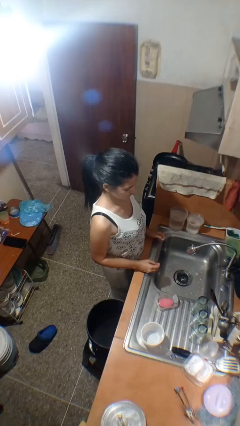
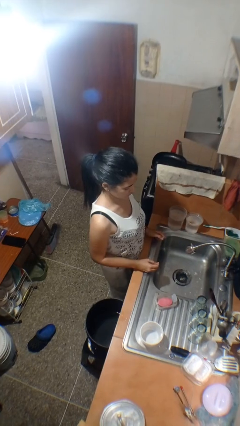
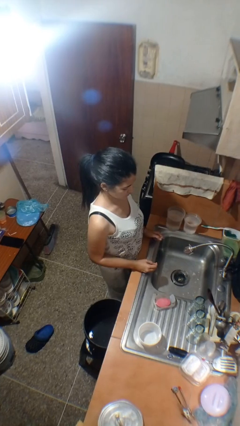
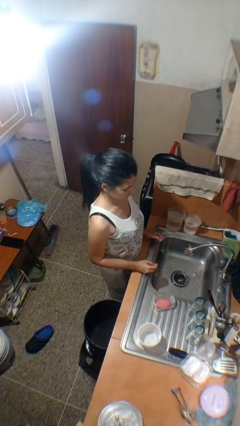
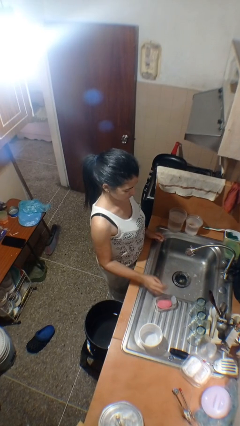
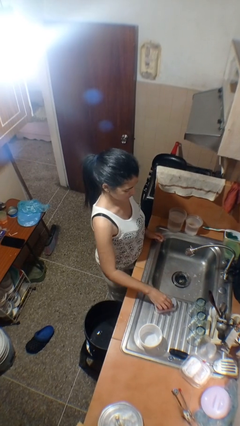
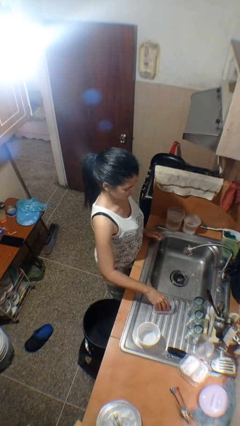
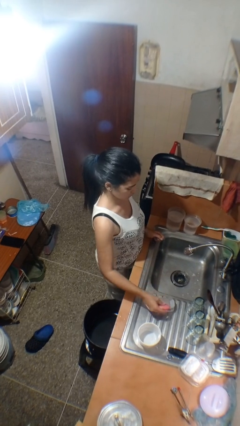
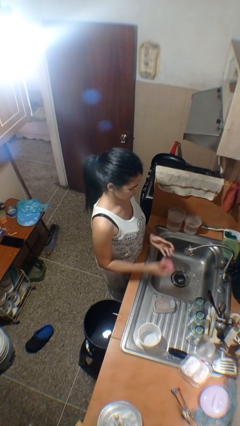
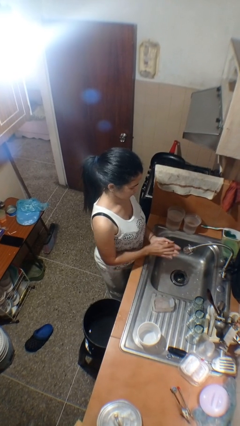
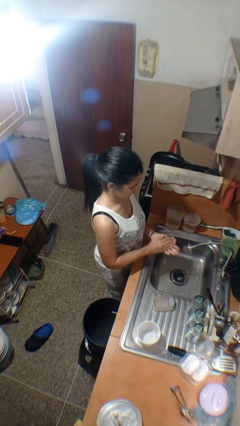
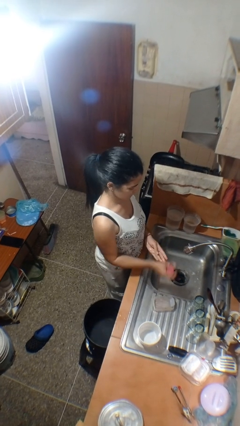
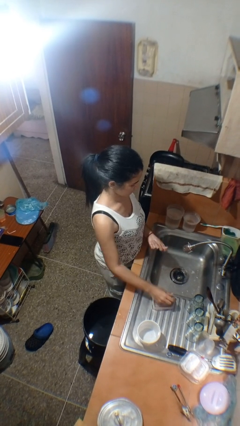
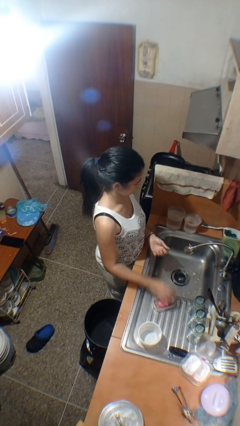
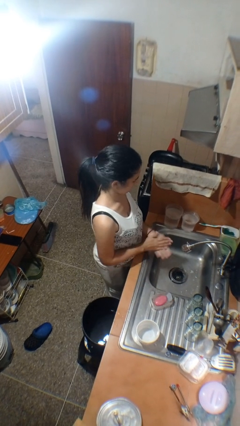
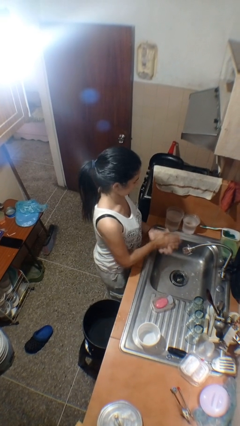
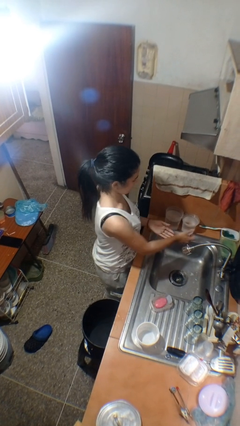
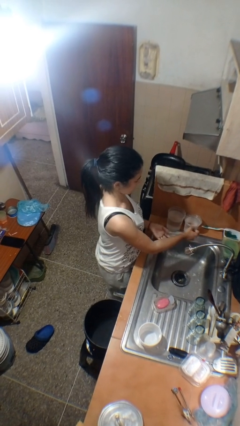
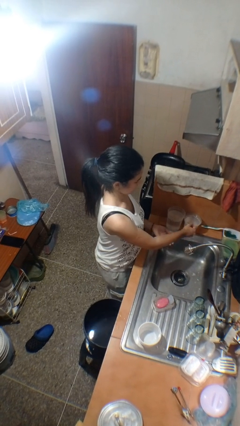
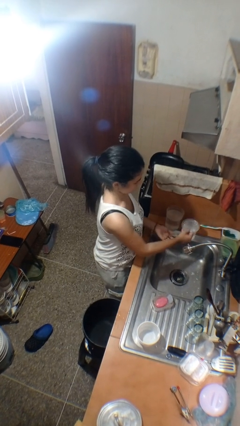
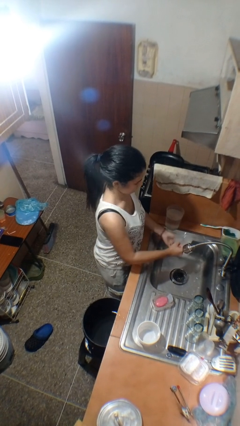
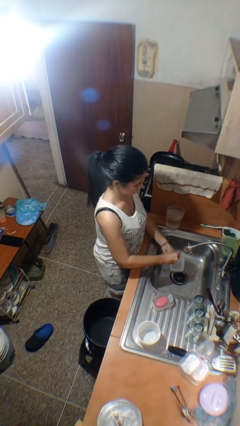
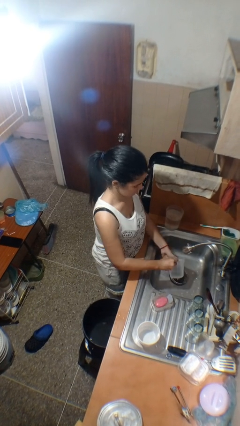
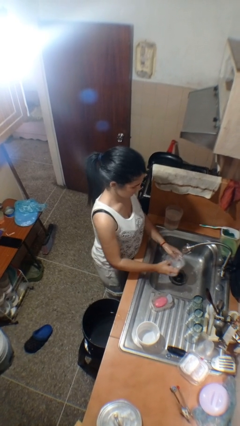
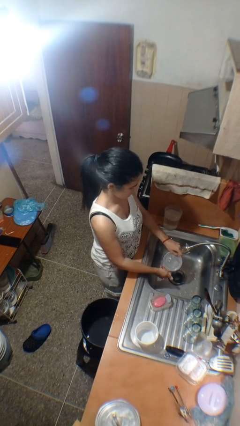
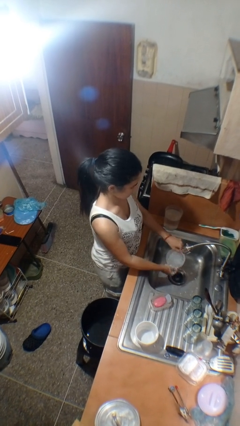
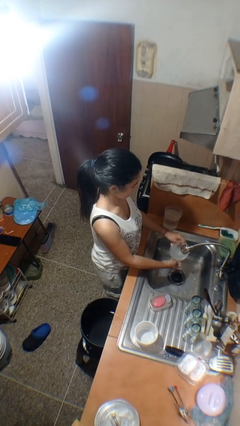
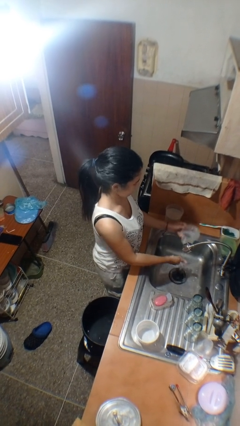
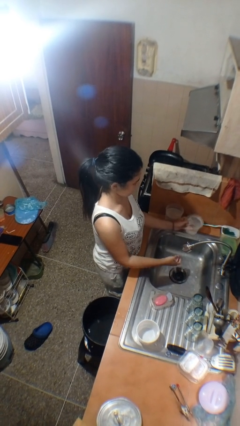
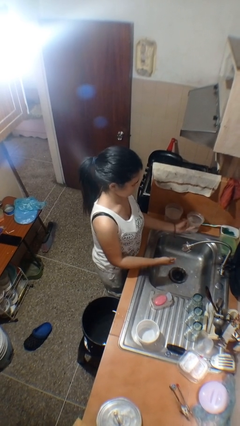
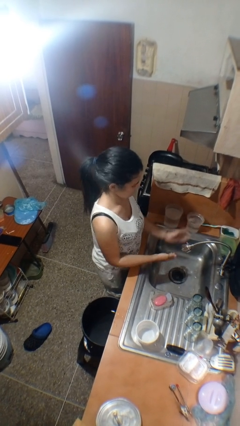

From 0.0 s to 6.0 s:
person washes hands

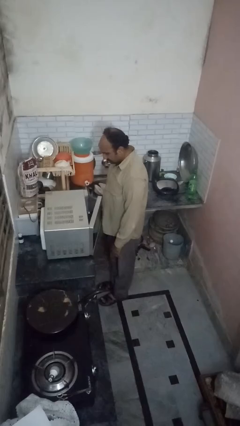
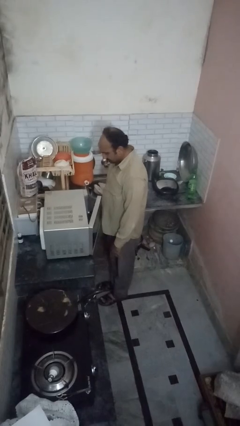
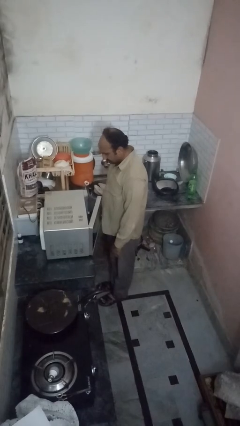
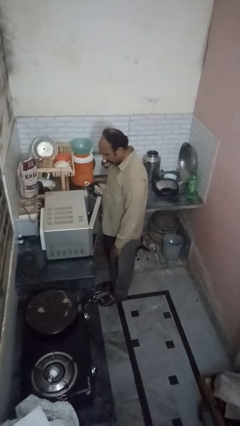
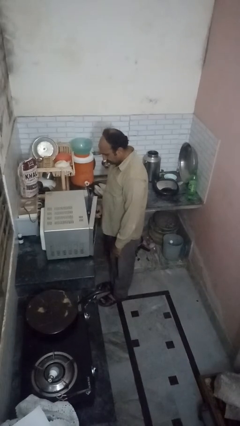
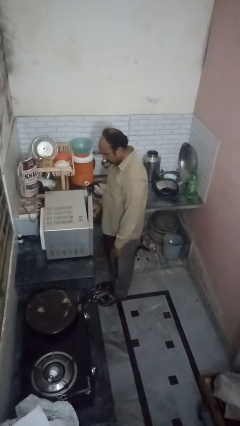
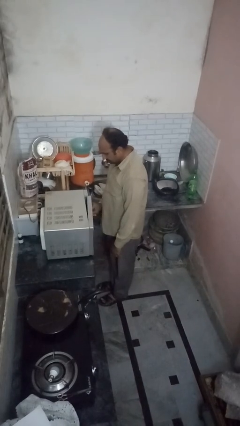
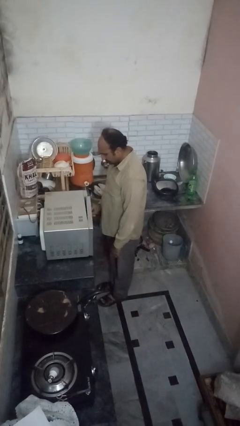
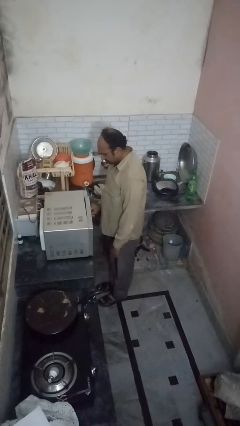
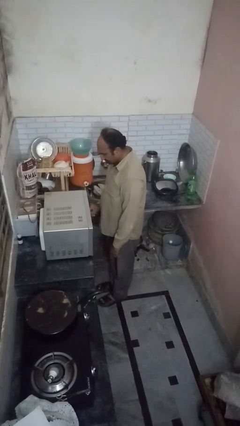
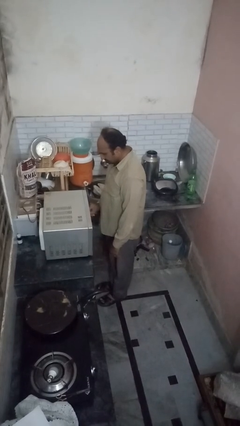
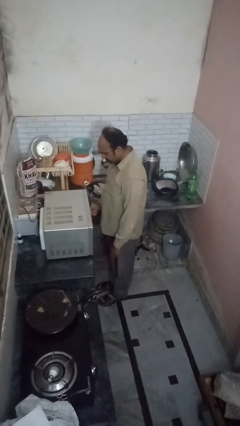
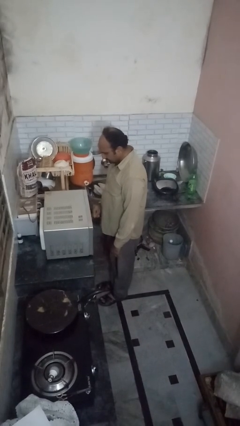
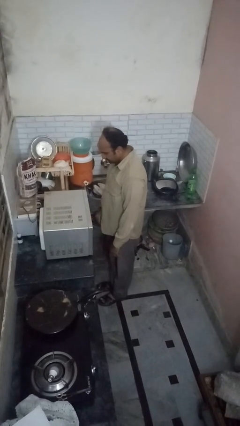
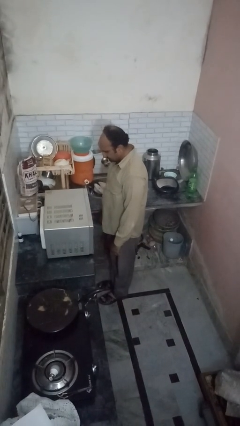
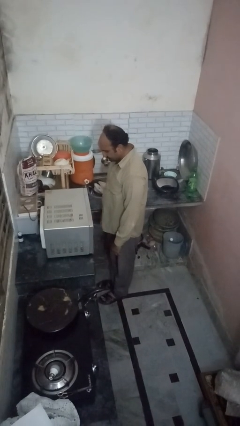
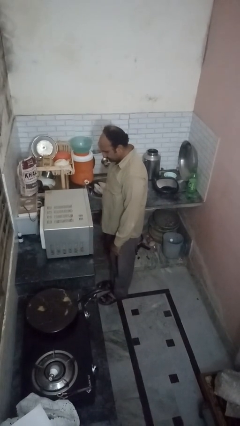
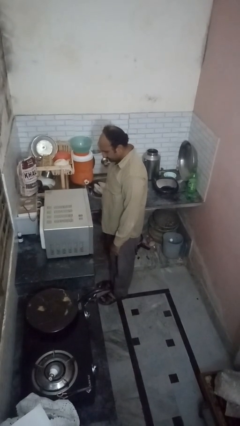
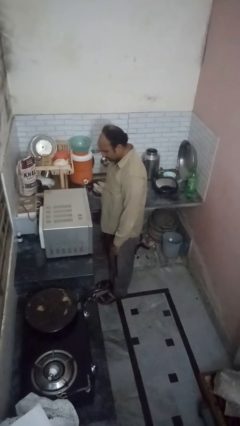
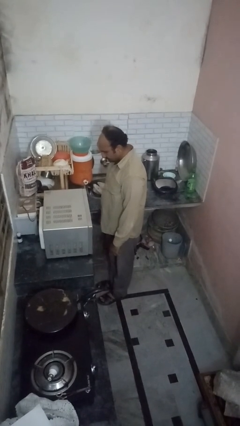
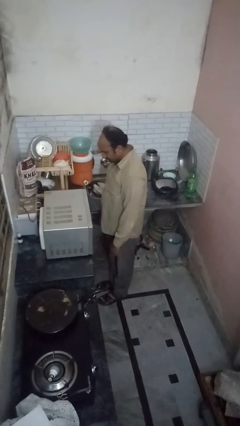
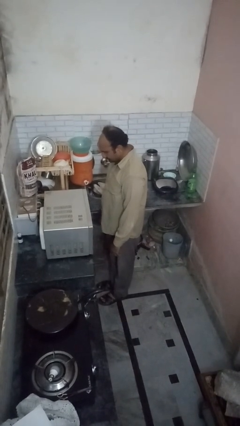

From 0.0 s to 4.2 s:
person closes oven door

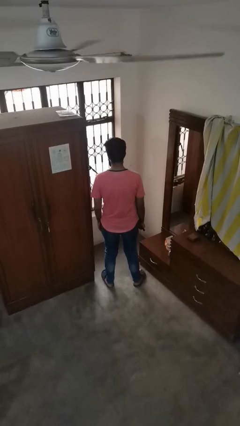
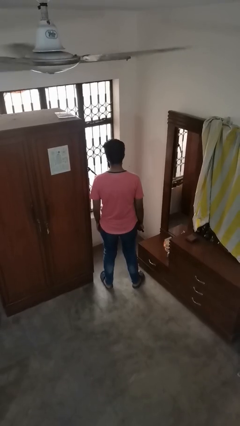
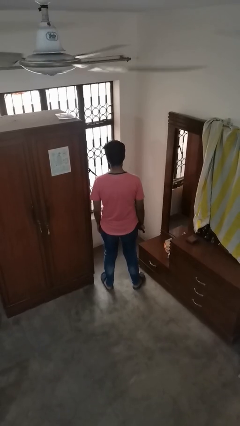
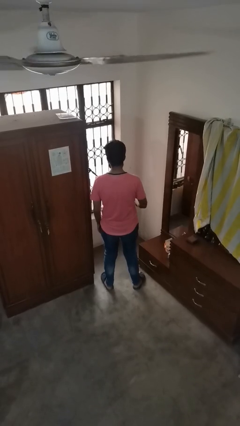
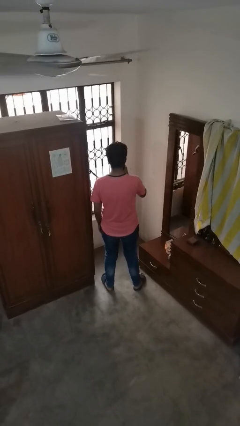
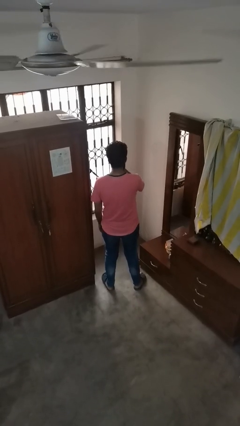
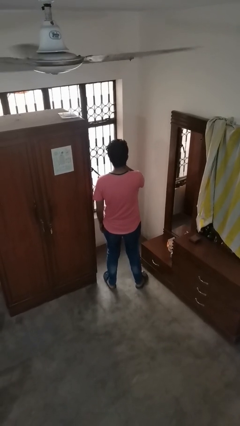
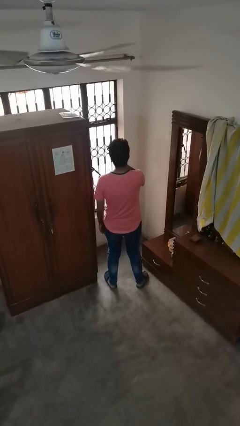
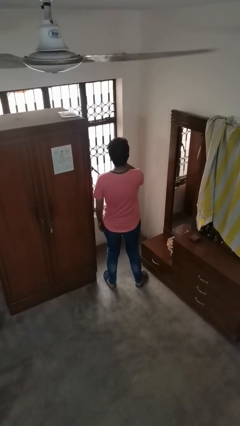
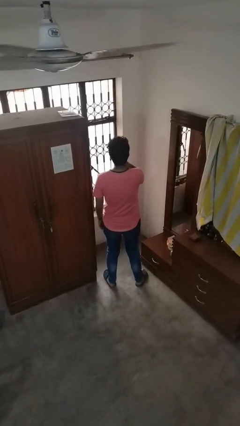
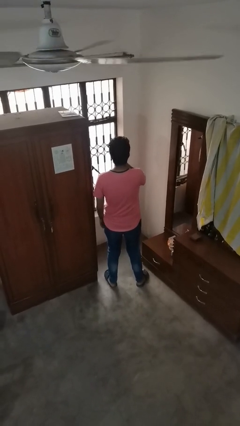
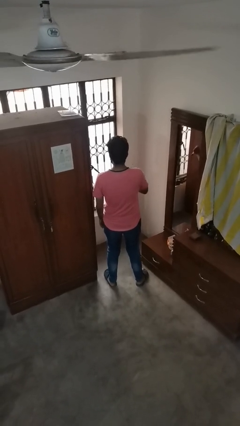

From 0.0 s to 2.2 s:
person vapes

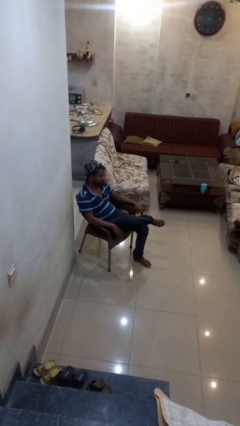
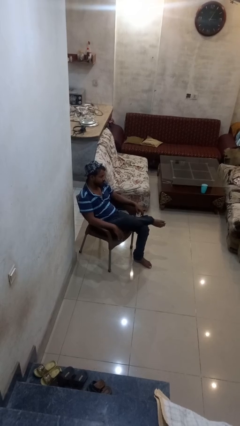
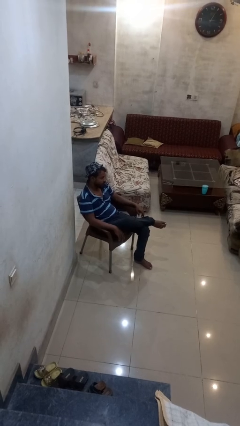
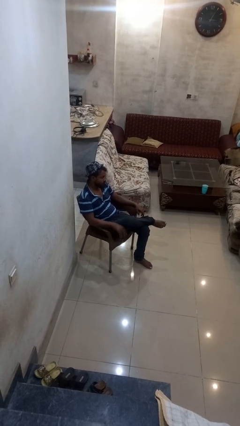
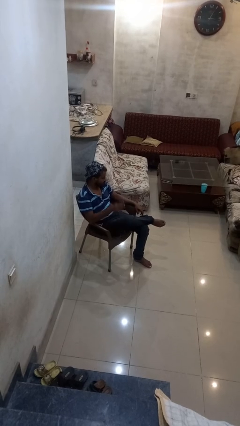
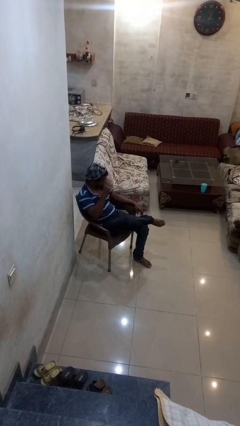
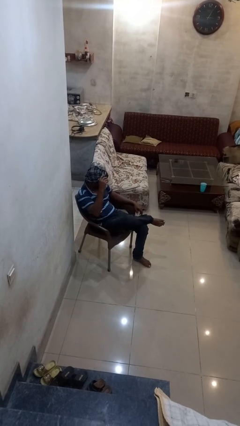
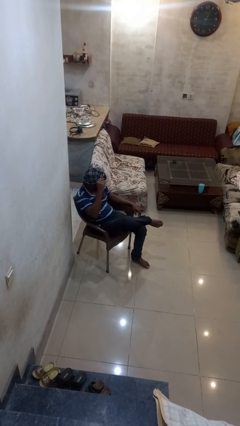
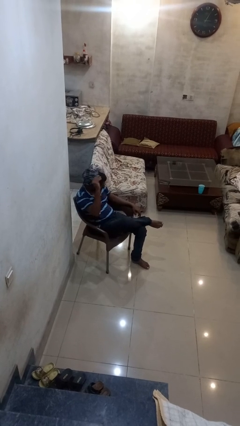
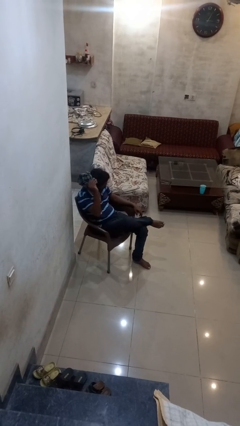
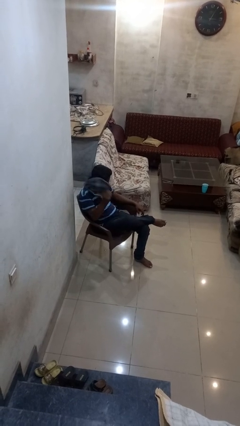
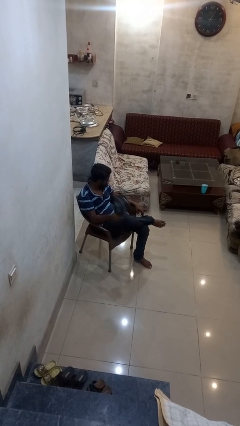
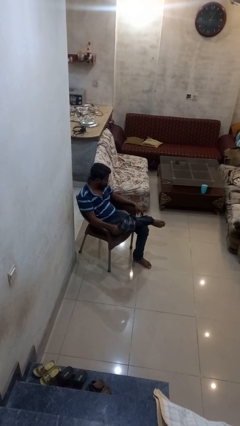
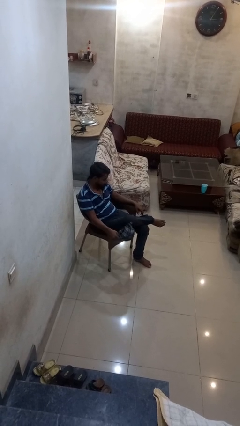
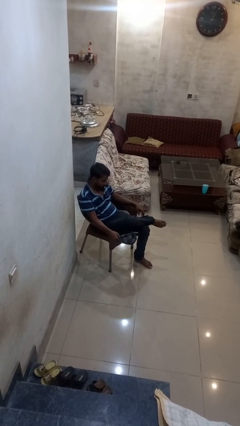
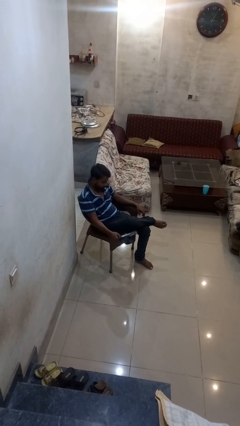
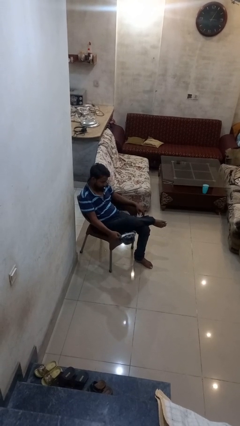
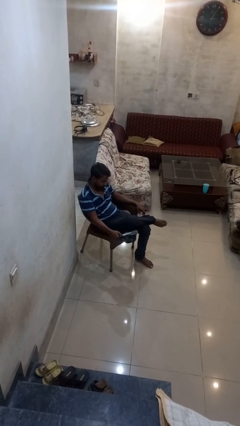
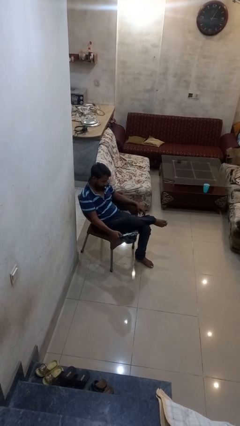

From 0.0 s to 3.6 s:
person takes off hat

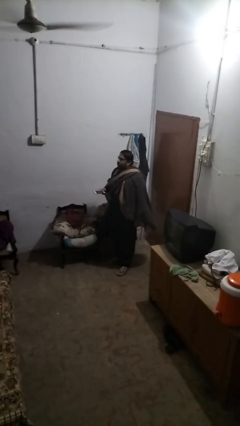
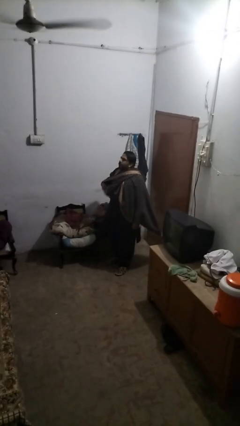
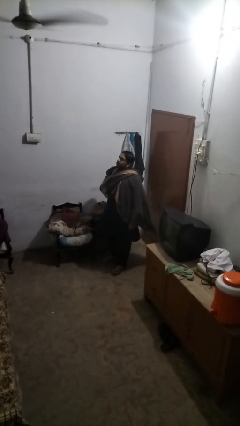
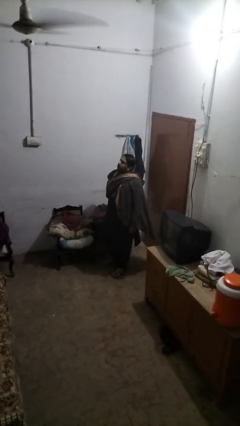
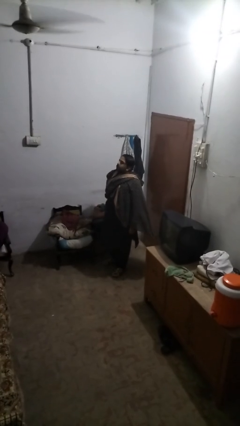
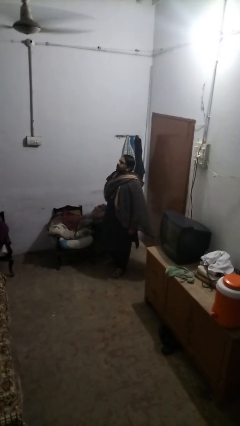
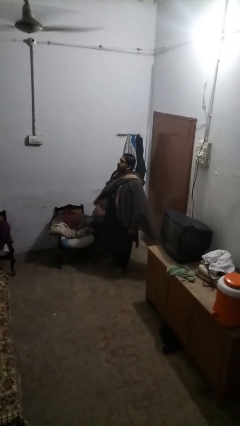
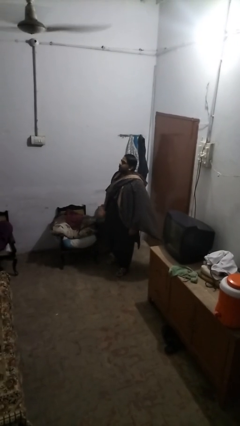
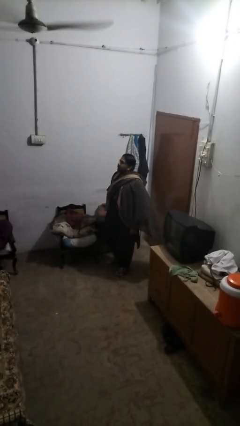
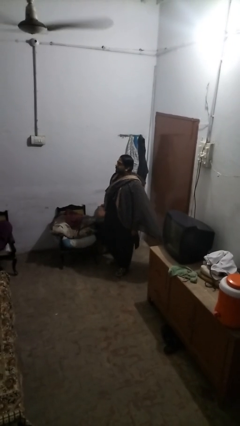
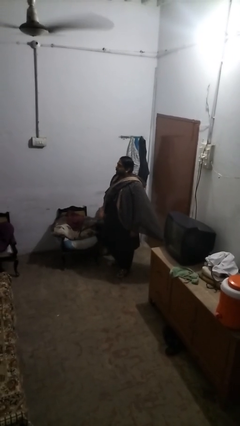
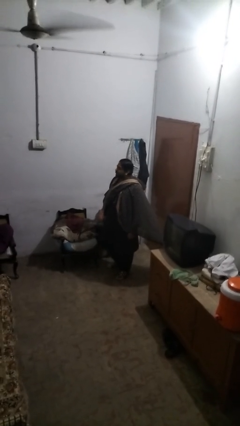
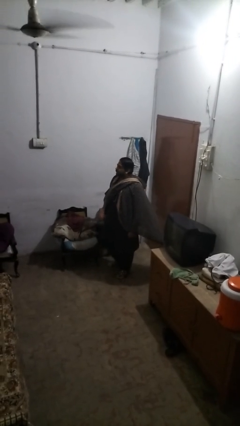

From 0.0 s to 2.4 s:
person puts phone into pocket
